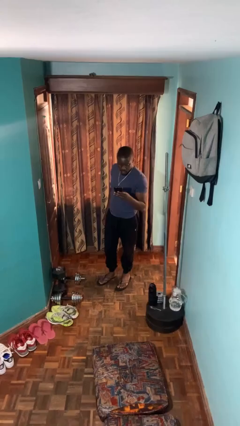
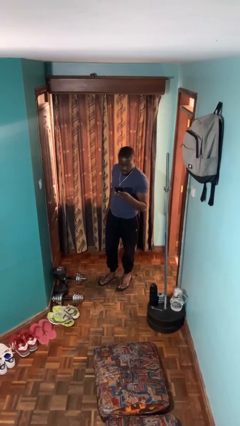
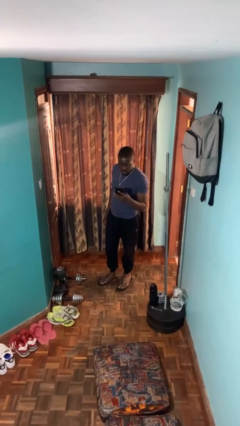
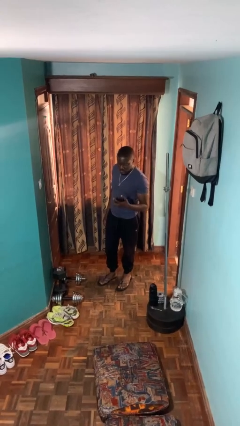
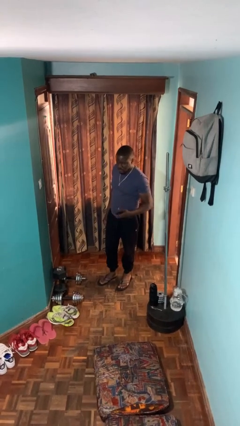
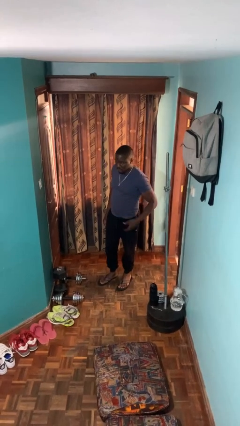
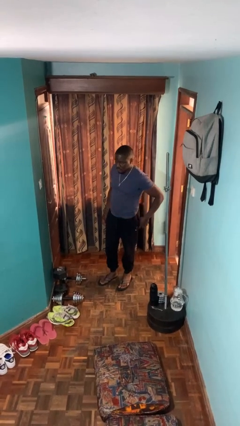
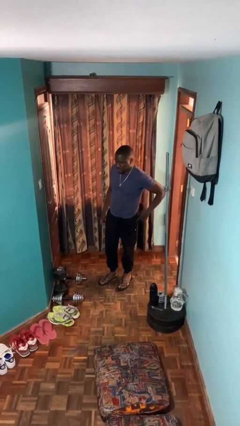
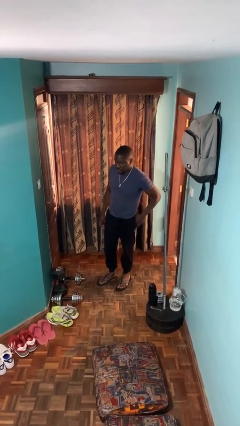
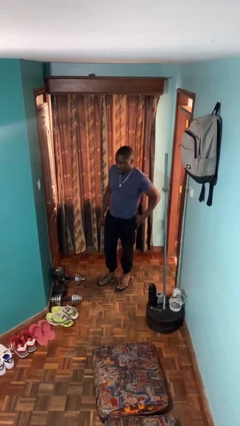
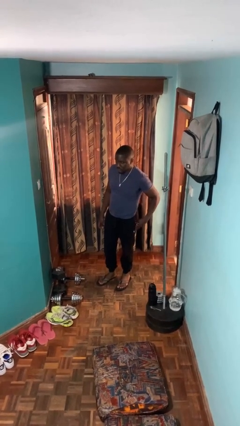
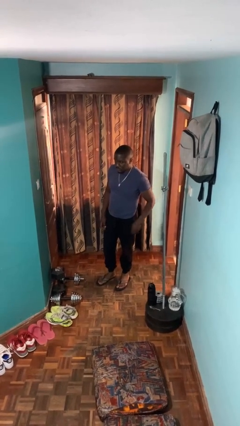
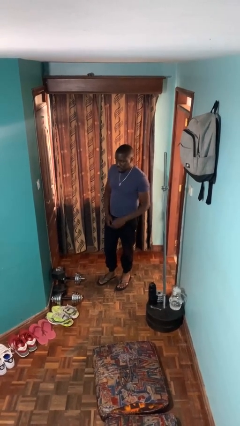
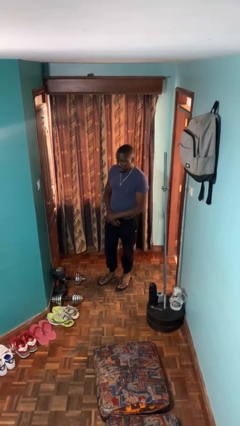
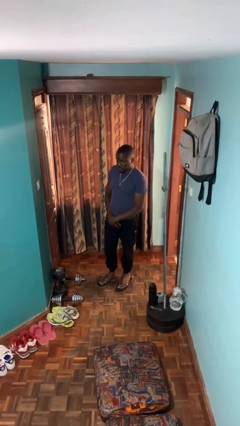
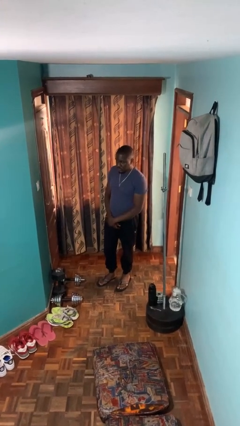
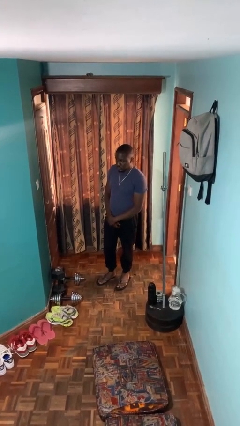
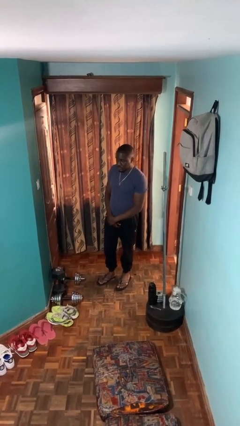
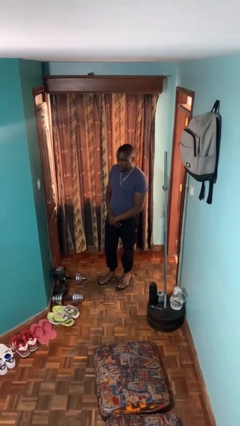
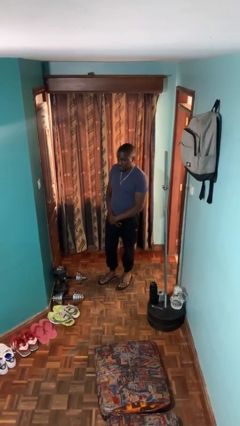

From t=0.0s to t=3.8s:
person puts phone into pocket

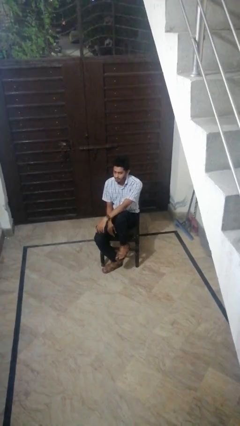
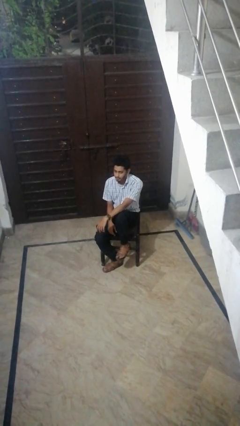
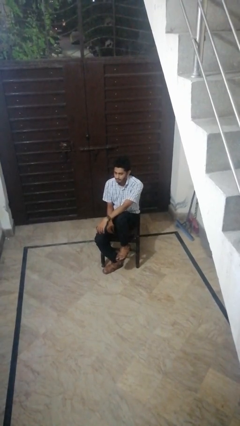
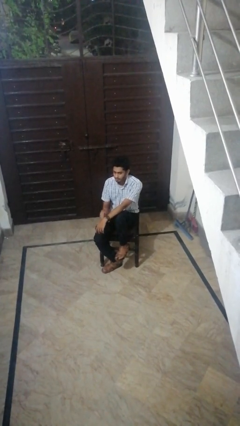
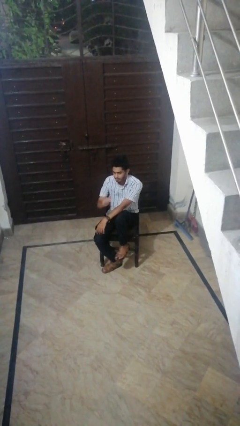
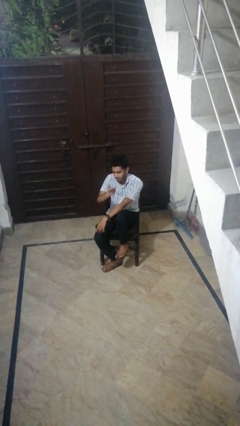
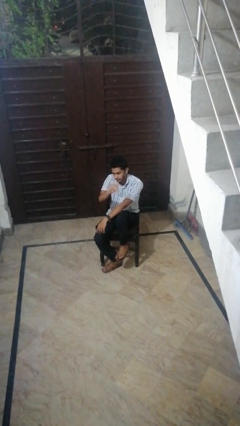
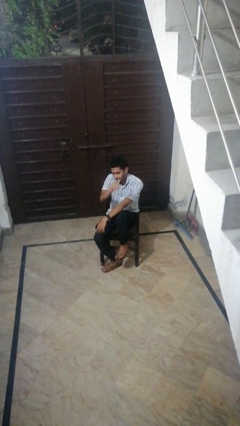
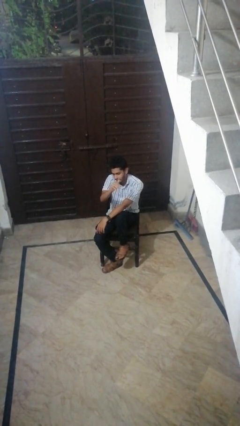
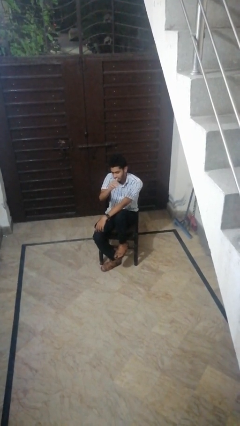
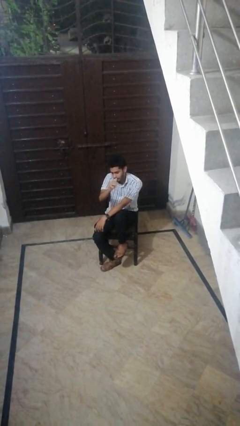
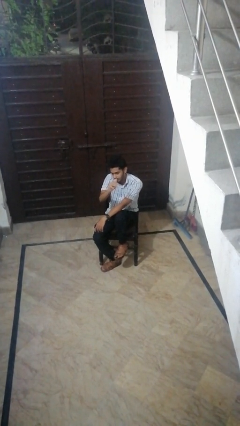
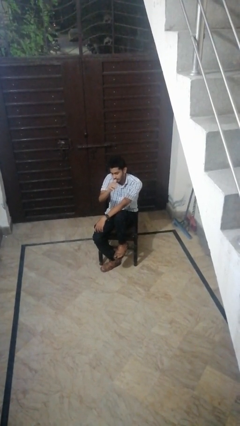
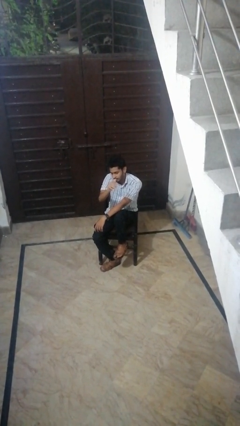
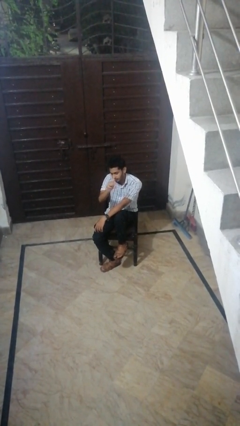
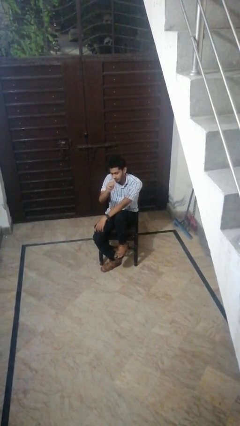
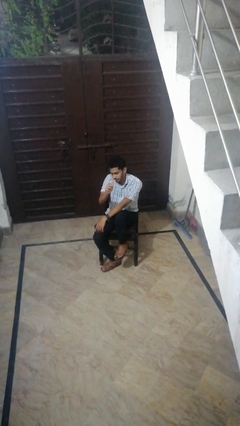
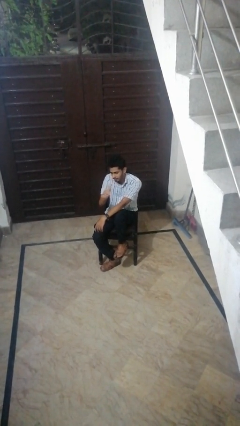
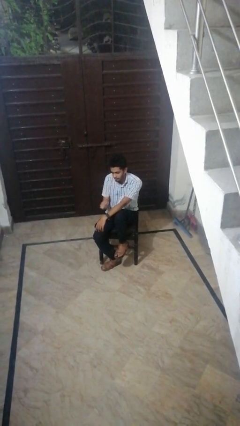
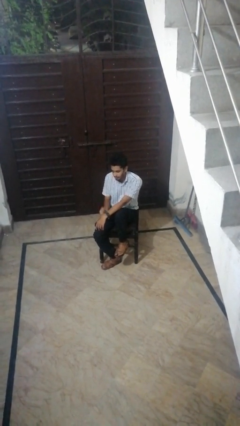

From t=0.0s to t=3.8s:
person gestures come here

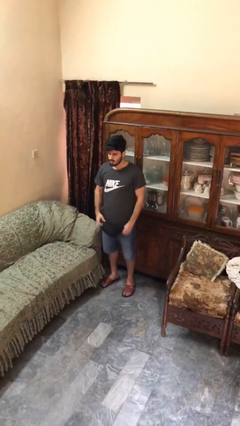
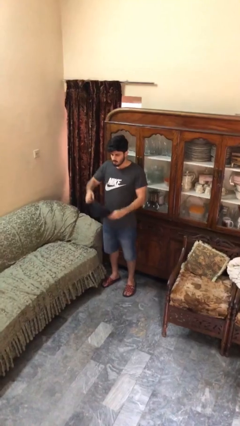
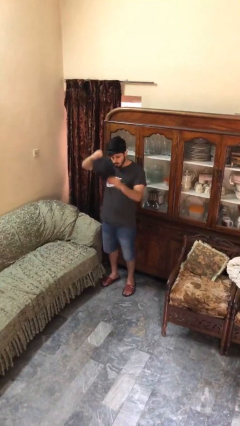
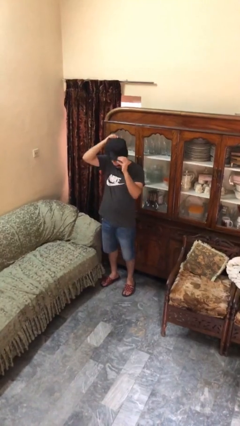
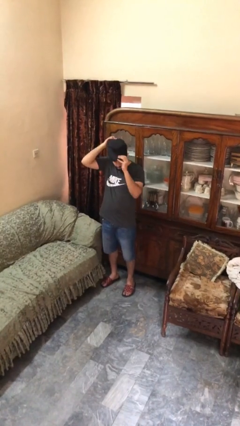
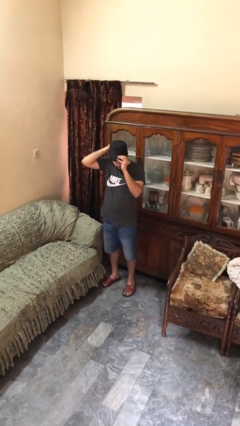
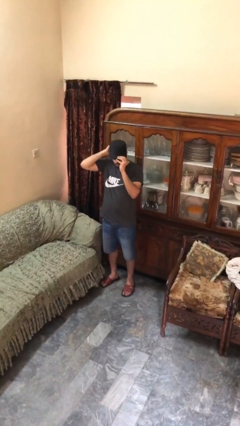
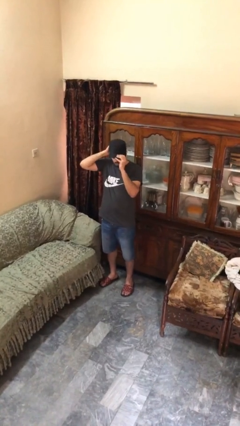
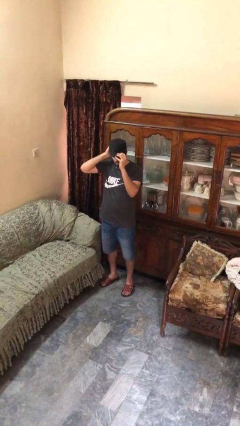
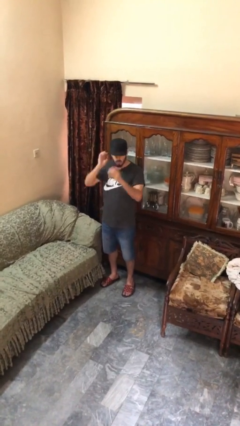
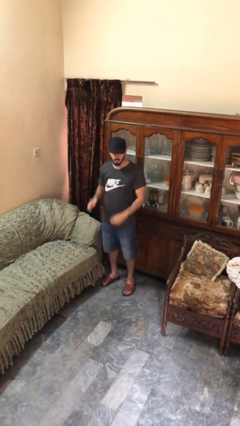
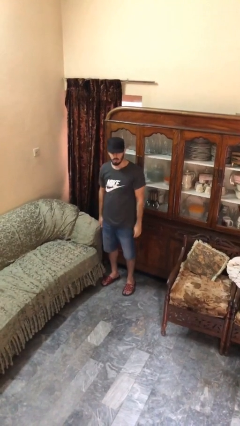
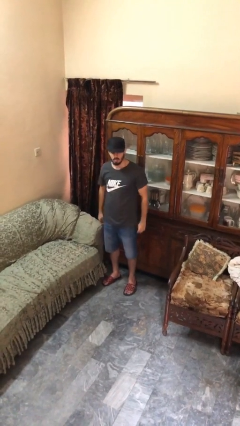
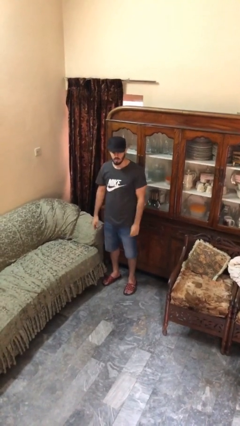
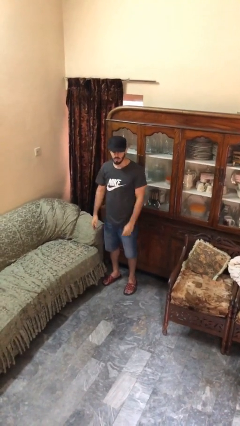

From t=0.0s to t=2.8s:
person puts on hat

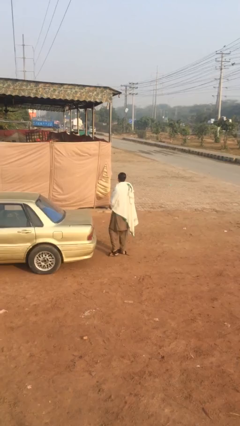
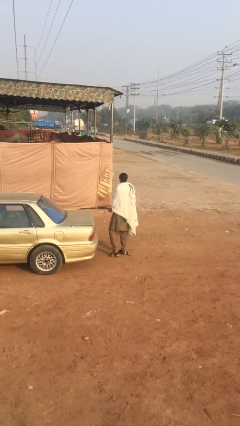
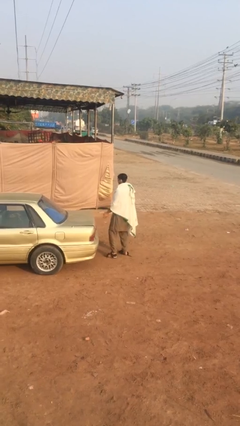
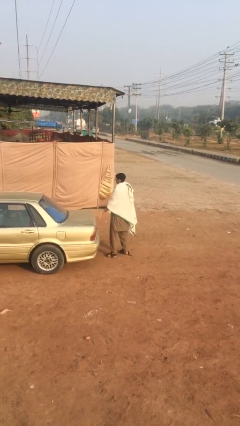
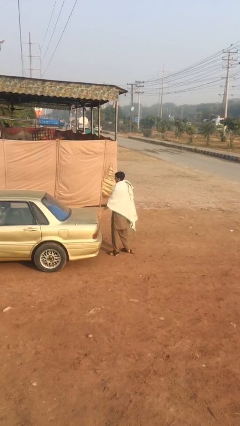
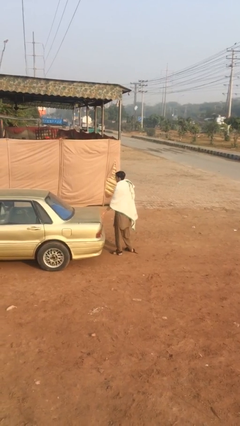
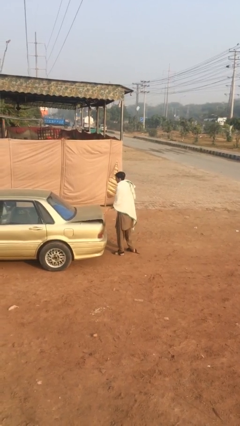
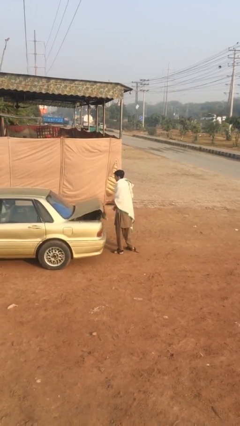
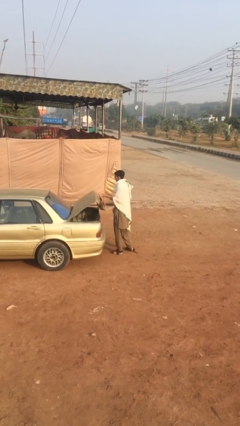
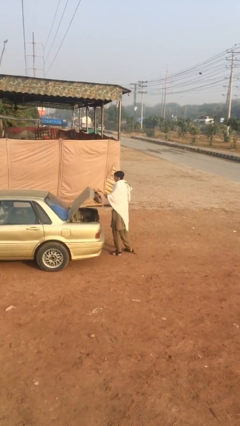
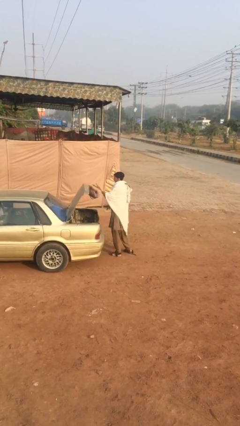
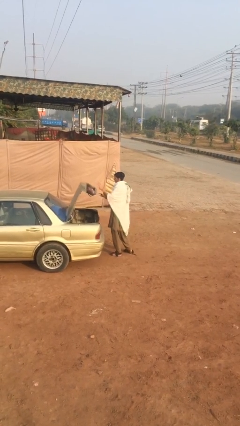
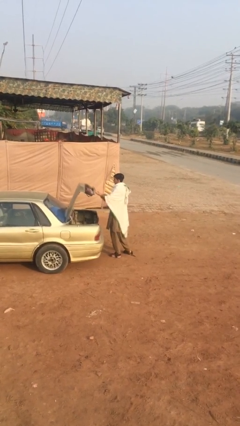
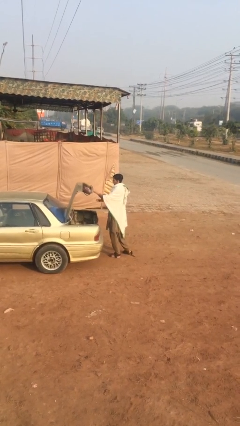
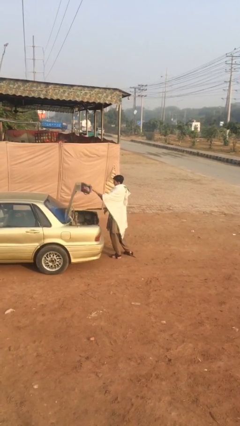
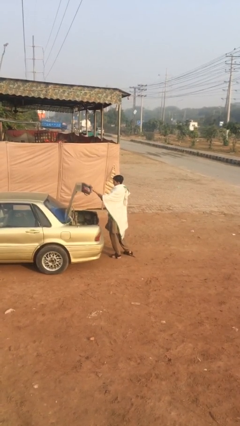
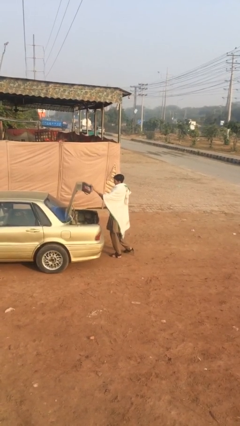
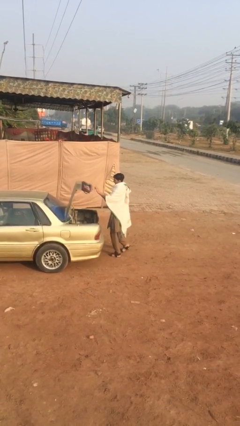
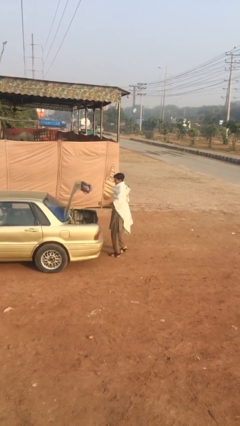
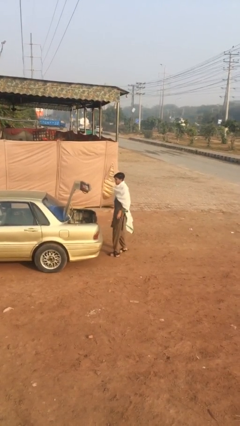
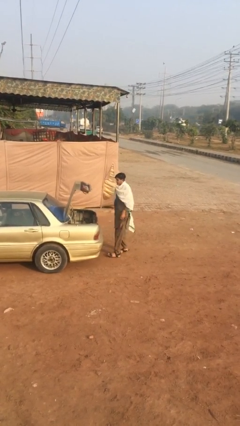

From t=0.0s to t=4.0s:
person opens car trunk

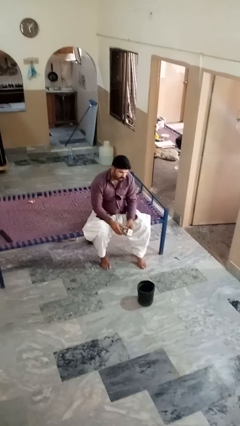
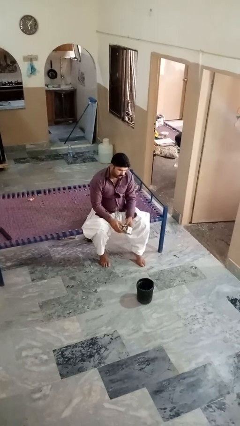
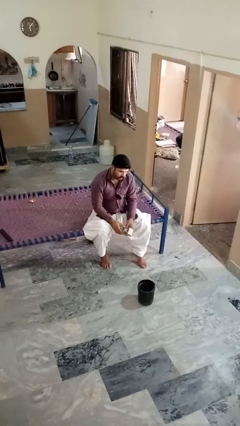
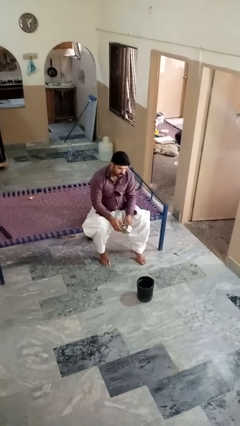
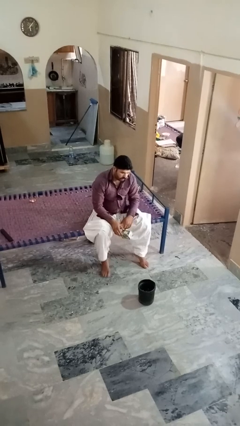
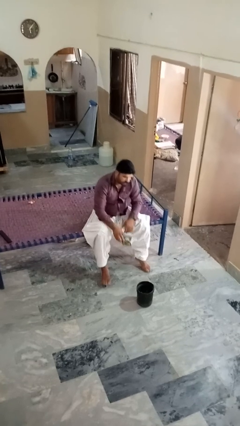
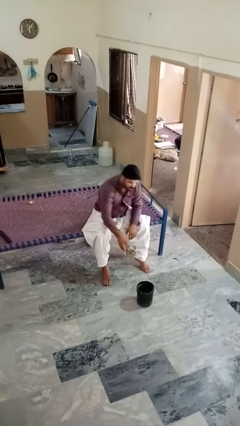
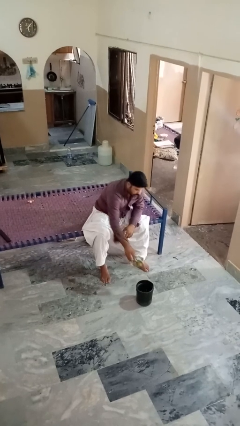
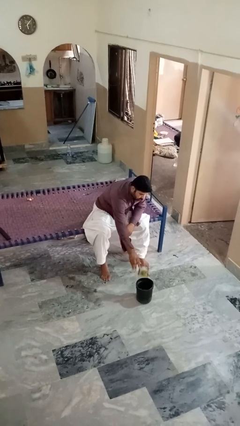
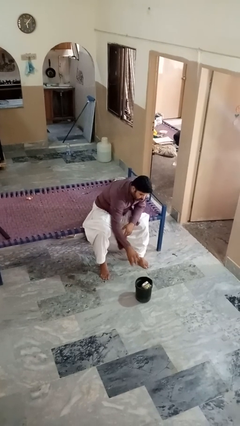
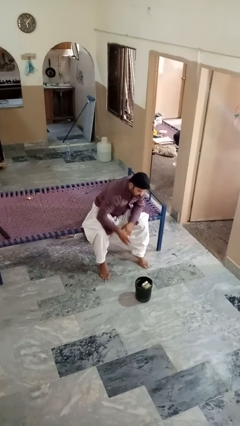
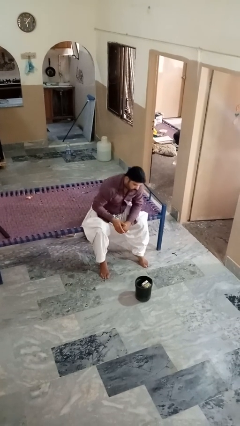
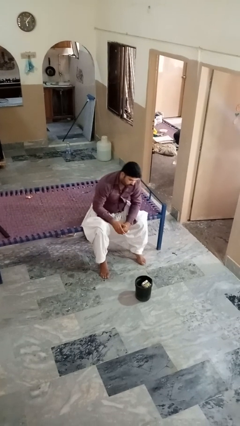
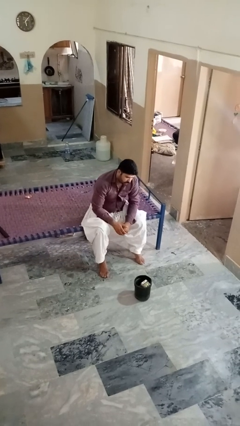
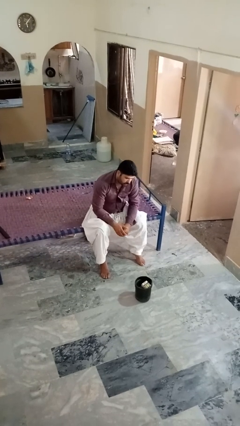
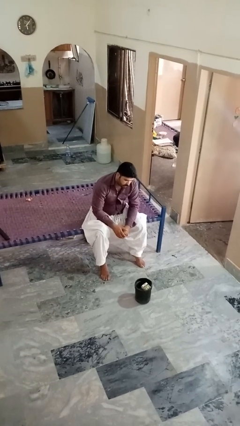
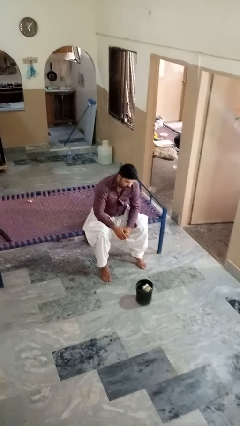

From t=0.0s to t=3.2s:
person puts object into basket
